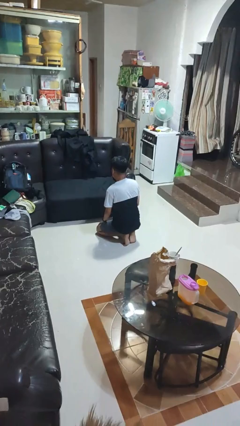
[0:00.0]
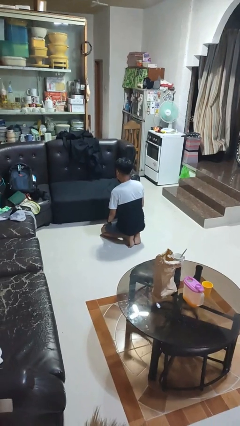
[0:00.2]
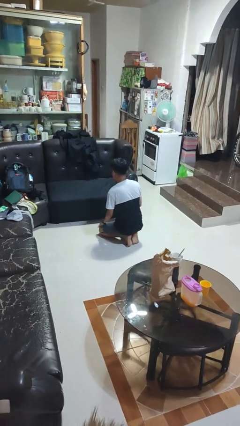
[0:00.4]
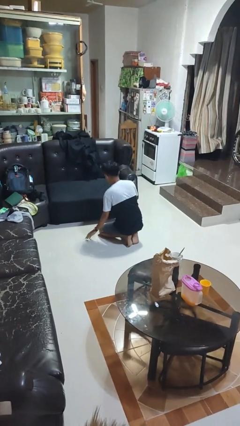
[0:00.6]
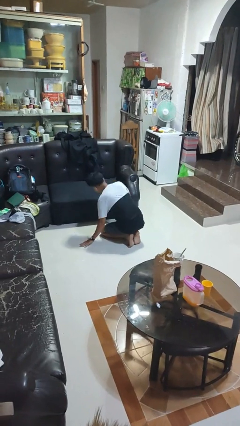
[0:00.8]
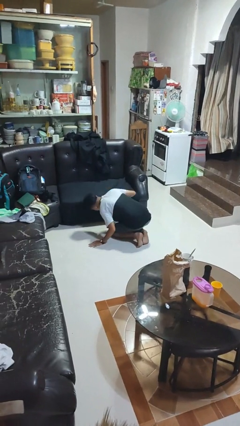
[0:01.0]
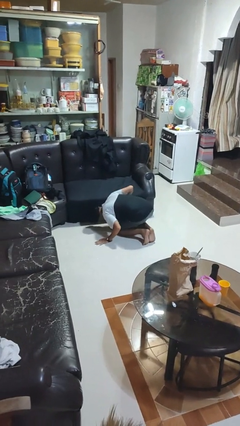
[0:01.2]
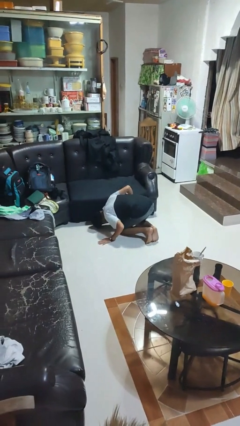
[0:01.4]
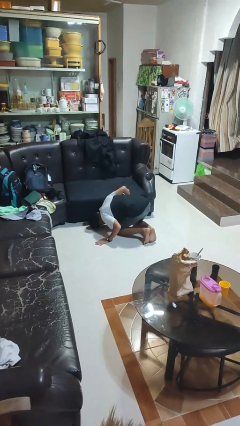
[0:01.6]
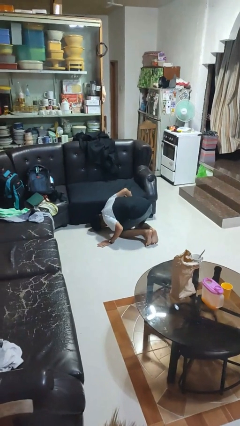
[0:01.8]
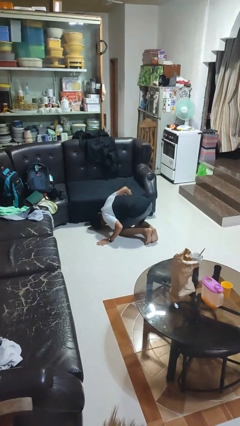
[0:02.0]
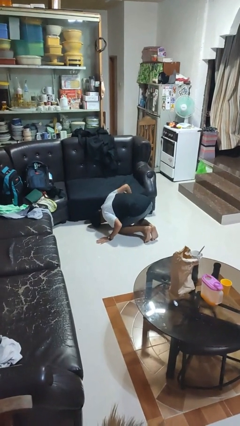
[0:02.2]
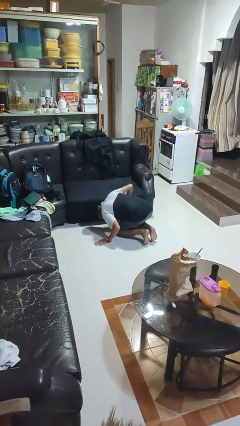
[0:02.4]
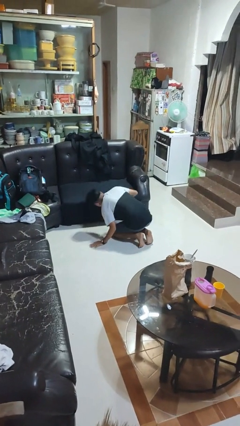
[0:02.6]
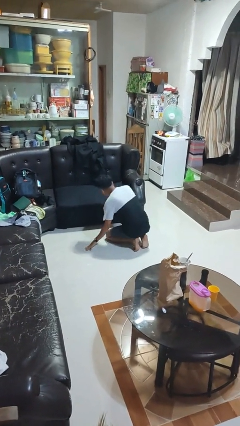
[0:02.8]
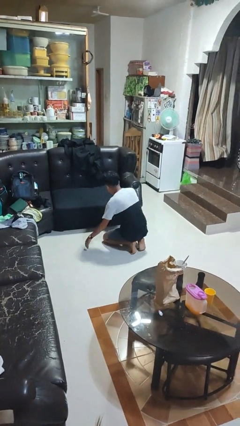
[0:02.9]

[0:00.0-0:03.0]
person searches under couch

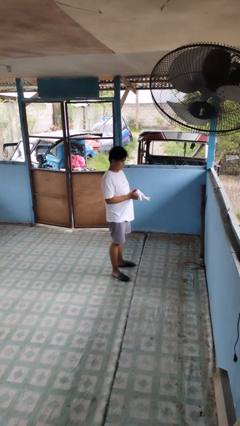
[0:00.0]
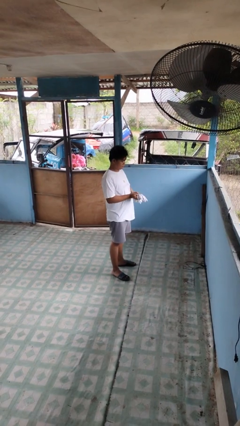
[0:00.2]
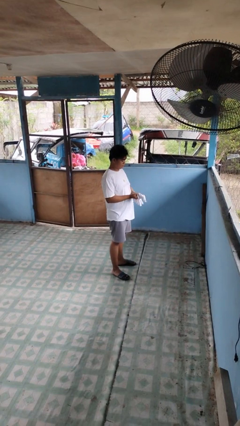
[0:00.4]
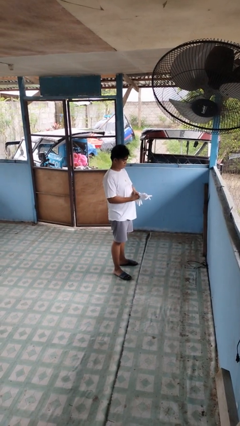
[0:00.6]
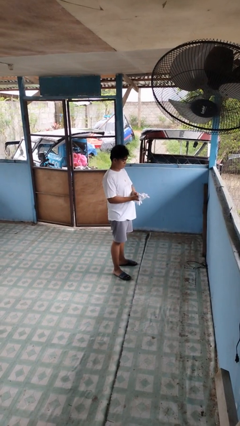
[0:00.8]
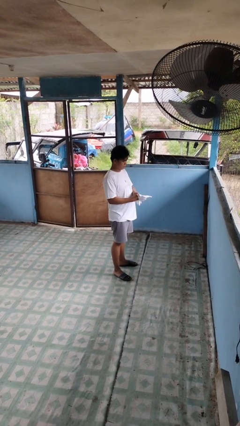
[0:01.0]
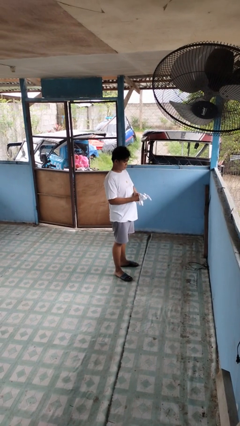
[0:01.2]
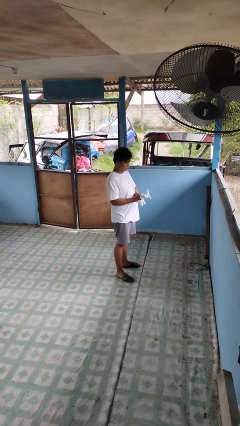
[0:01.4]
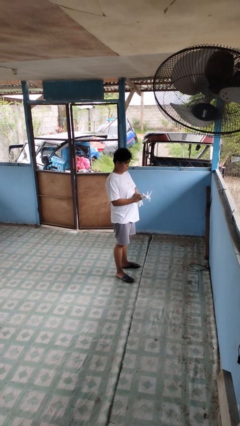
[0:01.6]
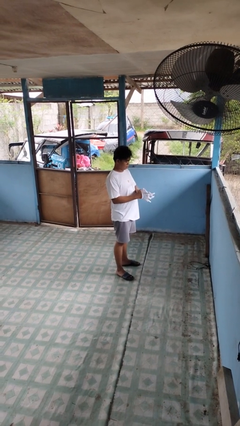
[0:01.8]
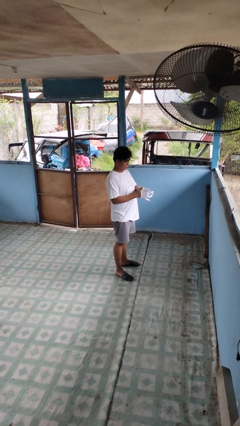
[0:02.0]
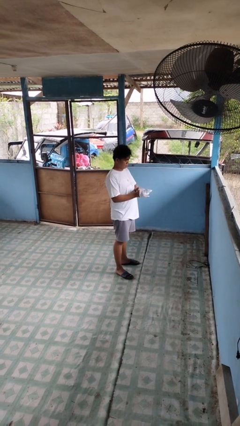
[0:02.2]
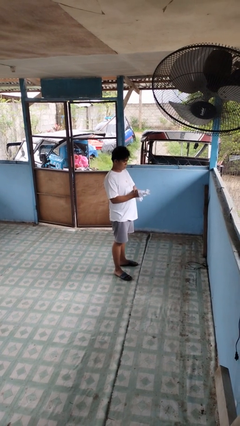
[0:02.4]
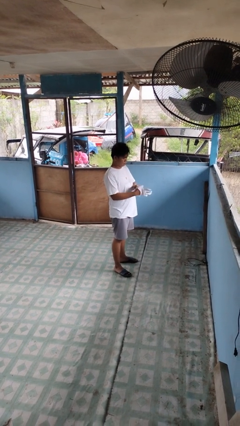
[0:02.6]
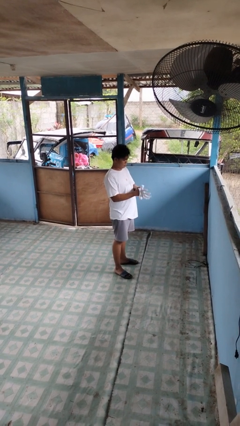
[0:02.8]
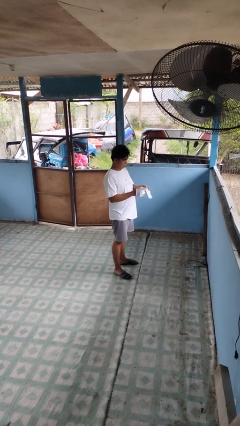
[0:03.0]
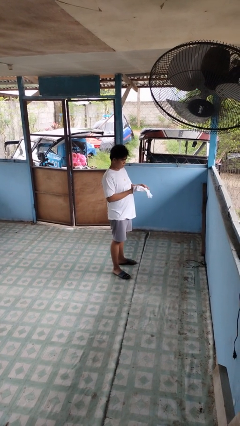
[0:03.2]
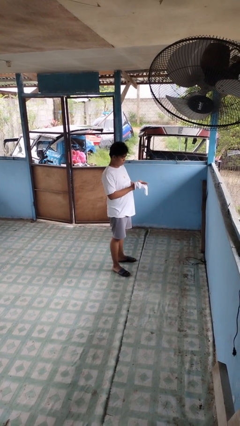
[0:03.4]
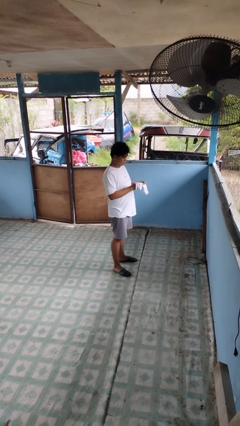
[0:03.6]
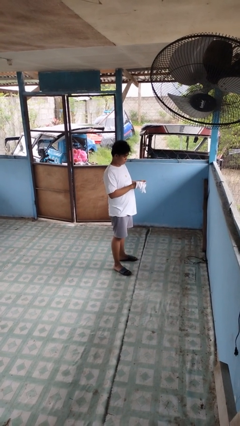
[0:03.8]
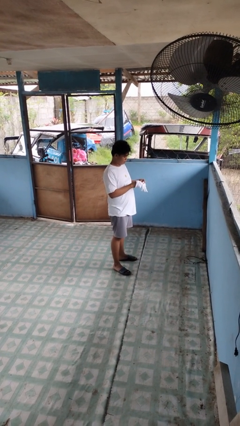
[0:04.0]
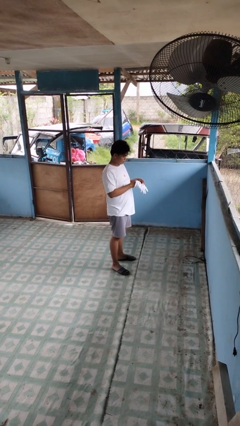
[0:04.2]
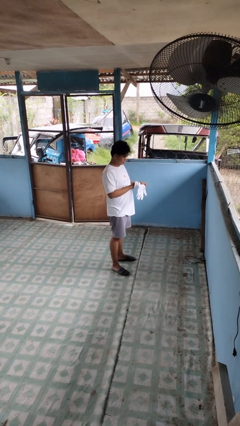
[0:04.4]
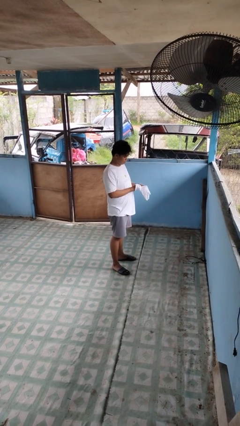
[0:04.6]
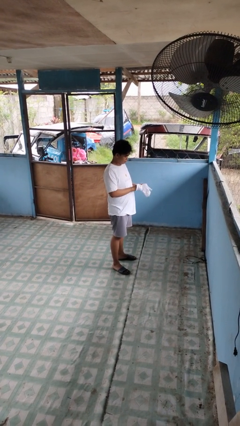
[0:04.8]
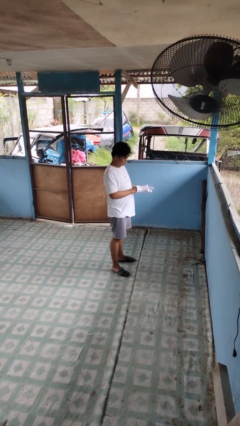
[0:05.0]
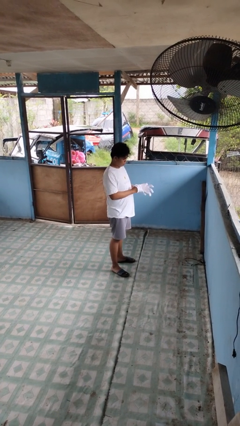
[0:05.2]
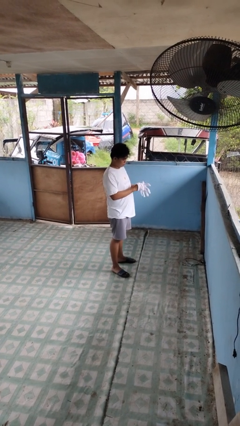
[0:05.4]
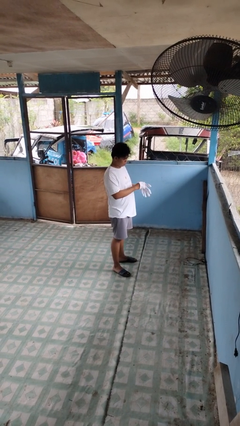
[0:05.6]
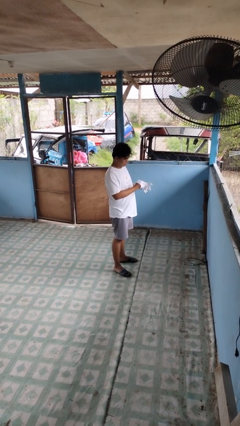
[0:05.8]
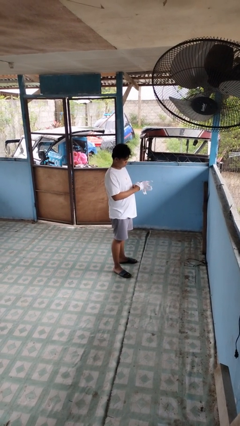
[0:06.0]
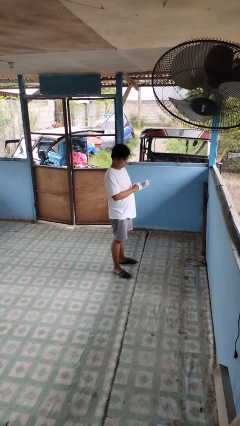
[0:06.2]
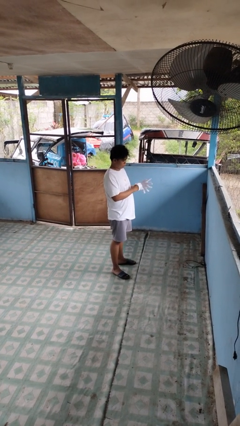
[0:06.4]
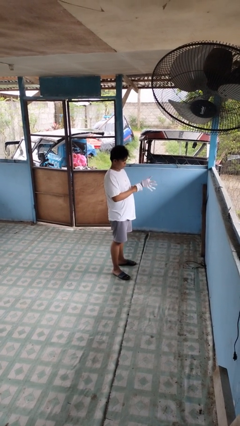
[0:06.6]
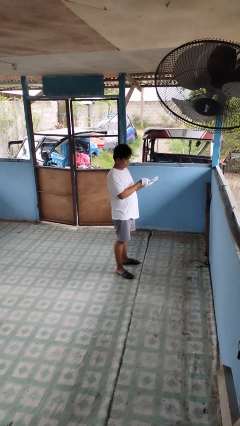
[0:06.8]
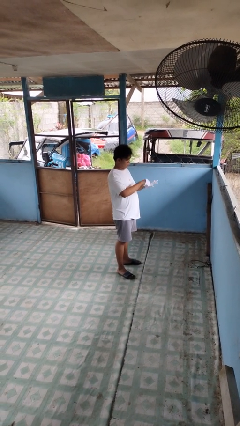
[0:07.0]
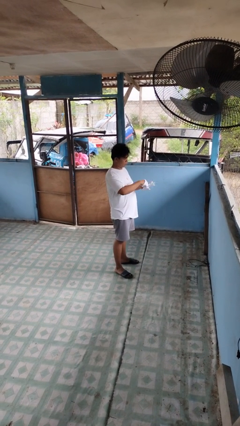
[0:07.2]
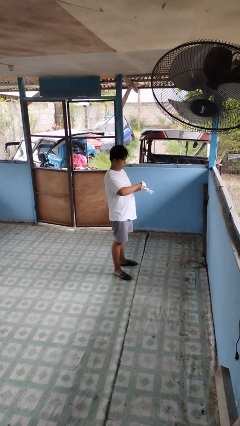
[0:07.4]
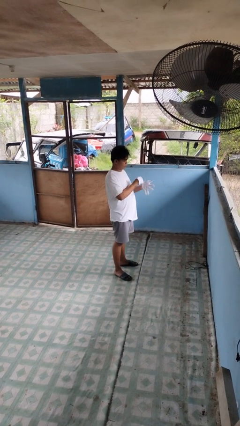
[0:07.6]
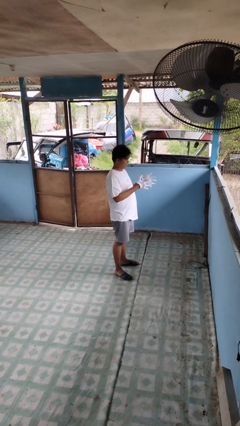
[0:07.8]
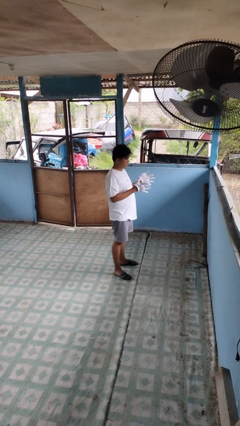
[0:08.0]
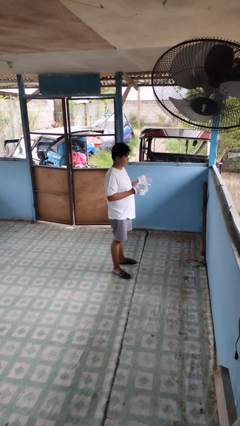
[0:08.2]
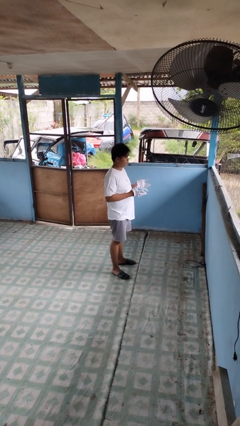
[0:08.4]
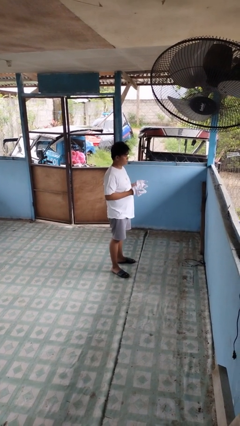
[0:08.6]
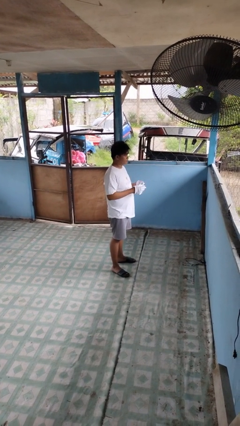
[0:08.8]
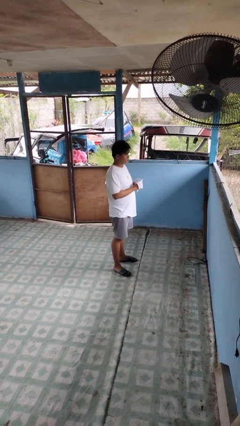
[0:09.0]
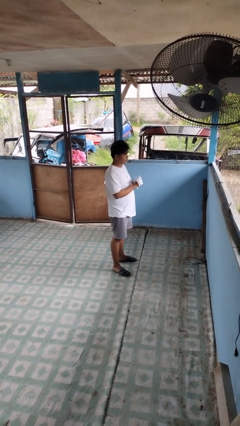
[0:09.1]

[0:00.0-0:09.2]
person puts on gloves

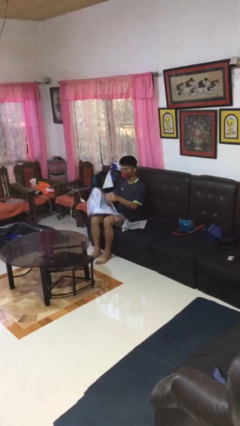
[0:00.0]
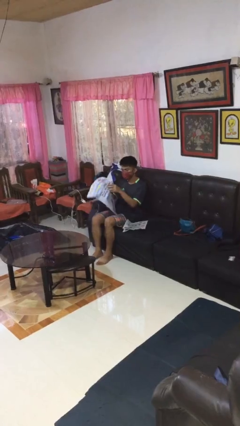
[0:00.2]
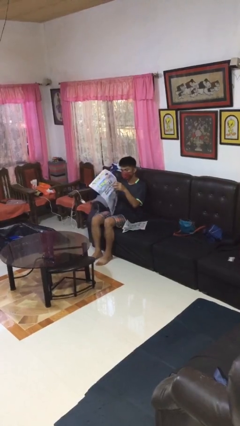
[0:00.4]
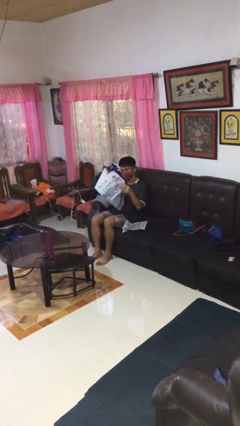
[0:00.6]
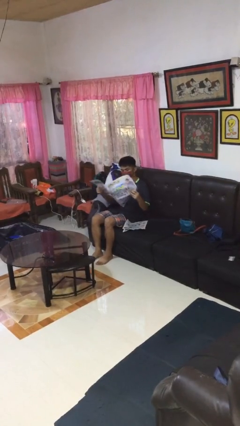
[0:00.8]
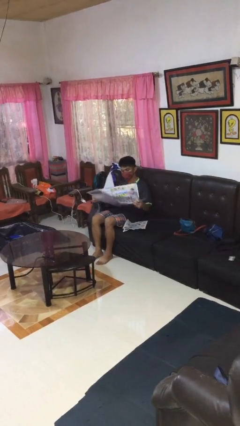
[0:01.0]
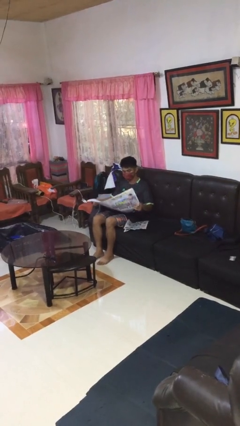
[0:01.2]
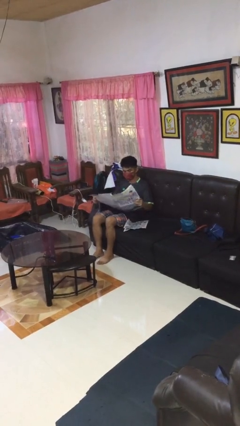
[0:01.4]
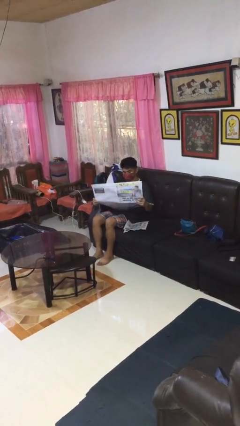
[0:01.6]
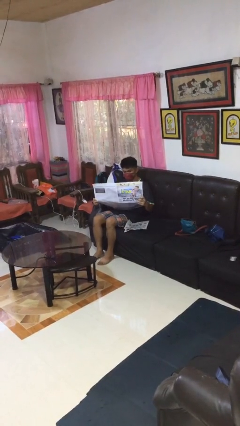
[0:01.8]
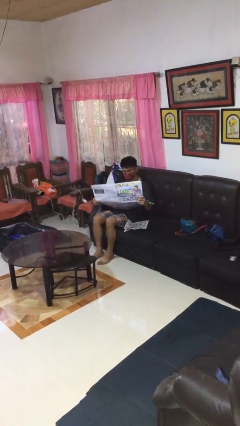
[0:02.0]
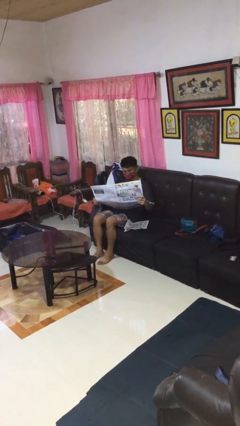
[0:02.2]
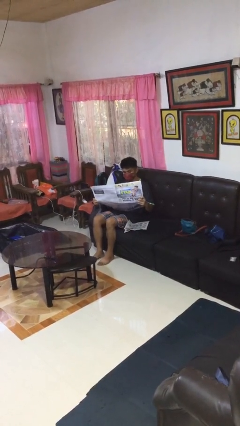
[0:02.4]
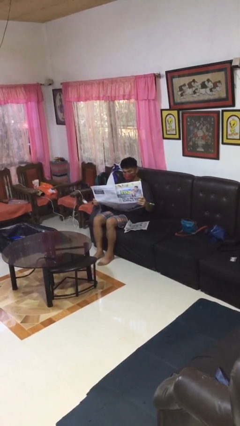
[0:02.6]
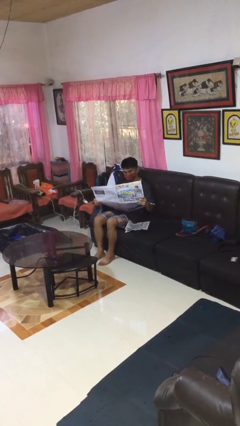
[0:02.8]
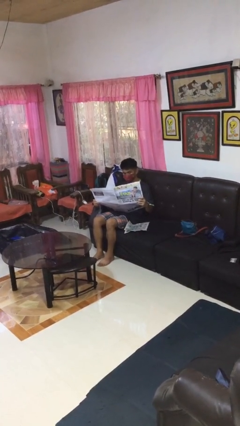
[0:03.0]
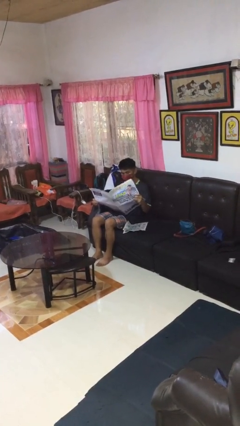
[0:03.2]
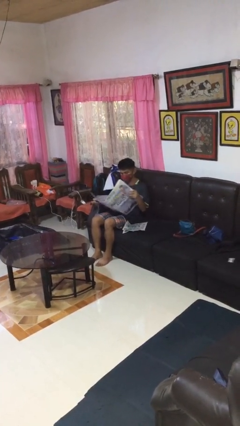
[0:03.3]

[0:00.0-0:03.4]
person reads newspaper

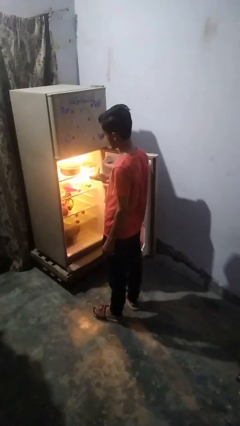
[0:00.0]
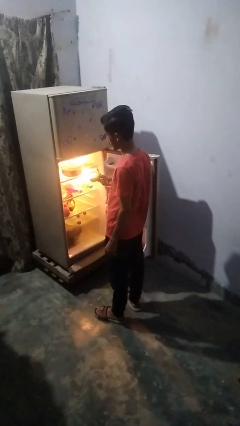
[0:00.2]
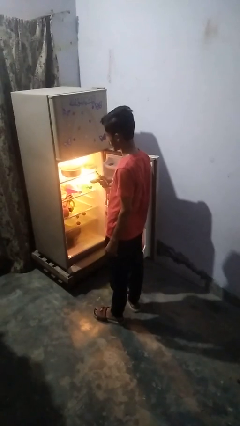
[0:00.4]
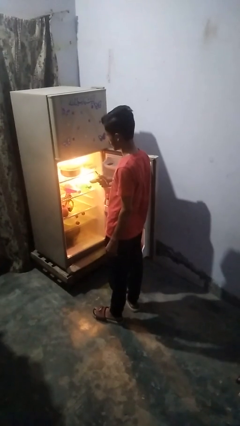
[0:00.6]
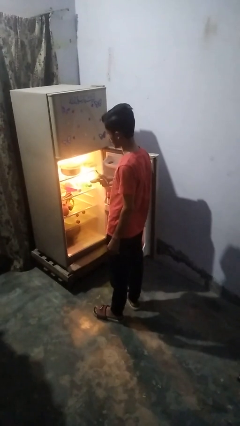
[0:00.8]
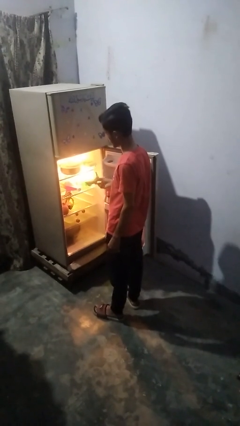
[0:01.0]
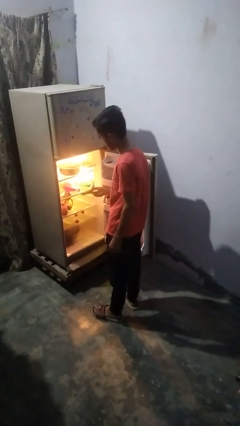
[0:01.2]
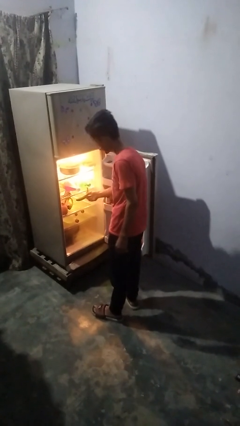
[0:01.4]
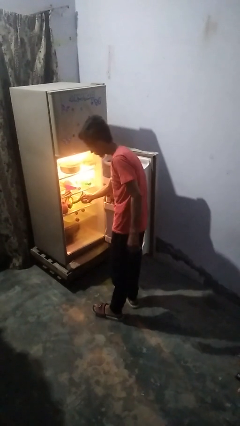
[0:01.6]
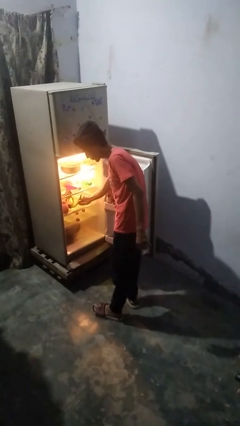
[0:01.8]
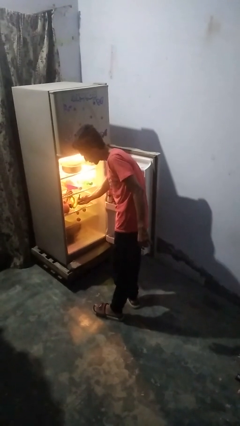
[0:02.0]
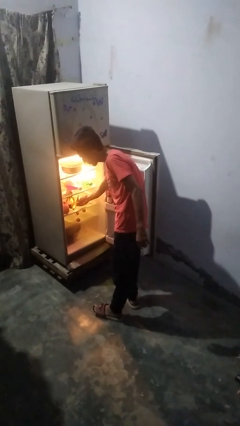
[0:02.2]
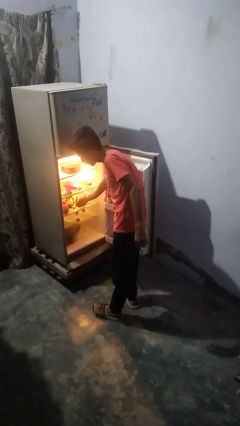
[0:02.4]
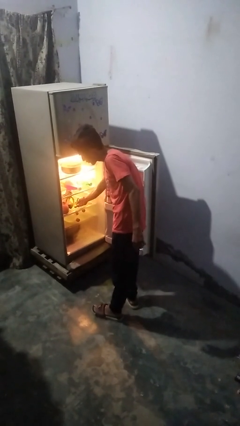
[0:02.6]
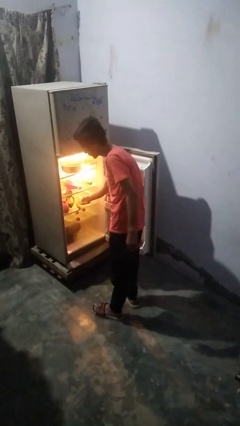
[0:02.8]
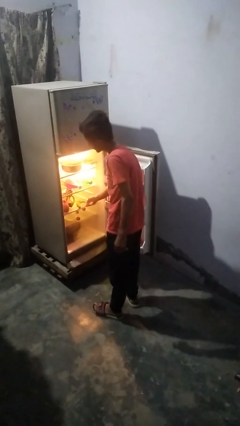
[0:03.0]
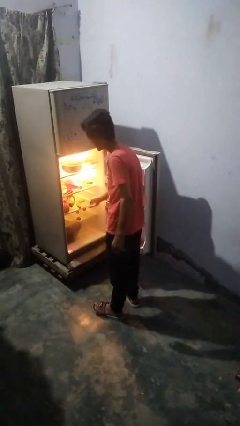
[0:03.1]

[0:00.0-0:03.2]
person takes object from refrigerator
